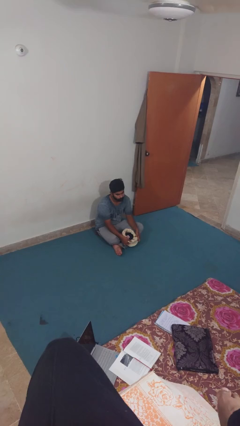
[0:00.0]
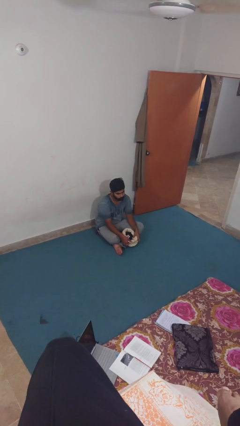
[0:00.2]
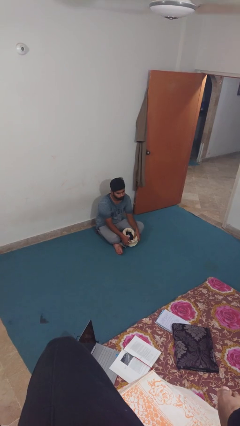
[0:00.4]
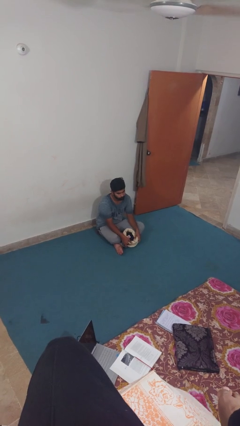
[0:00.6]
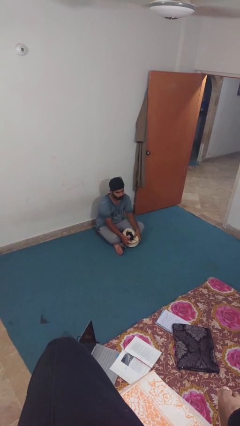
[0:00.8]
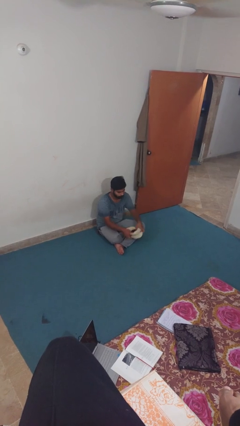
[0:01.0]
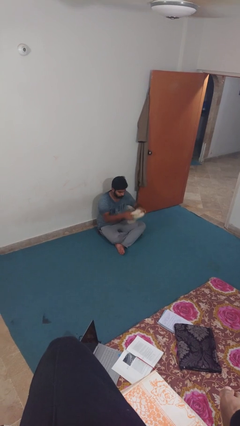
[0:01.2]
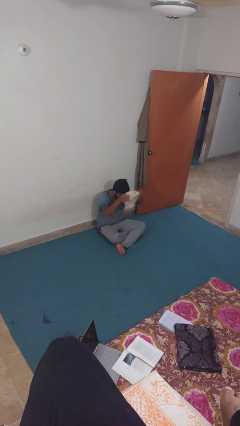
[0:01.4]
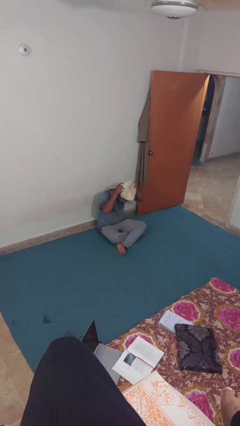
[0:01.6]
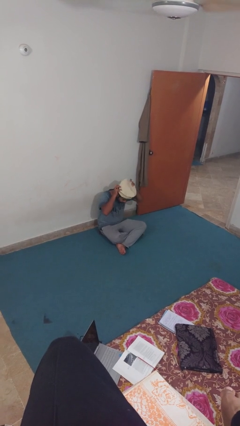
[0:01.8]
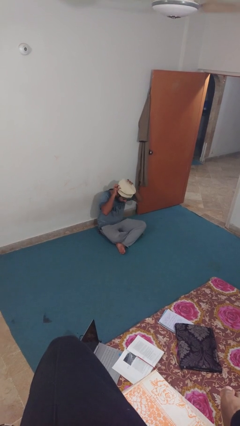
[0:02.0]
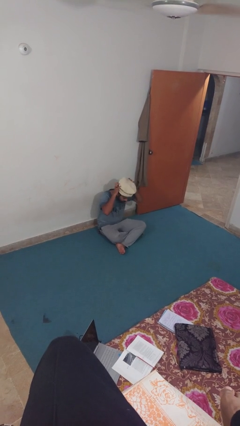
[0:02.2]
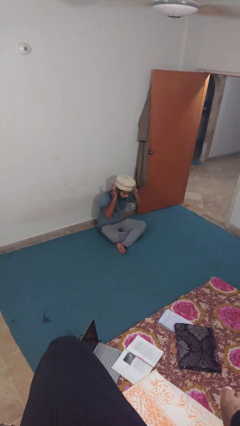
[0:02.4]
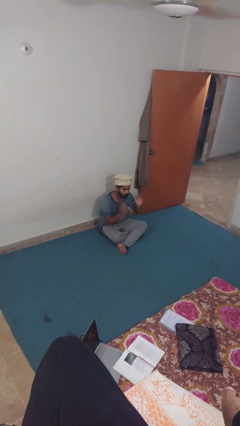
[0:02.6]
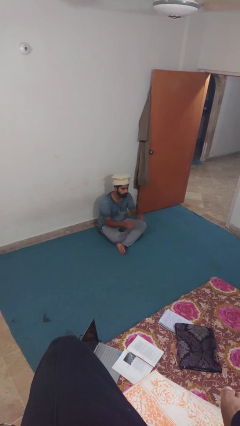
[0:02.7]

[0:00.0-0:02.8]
person puts on hat

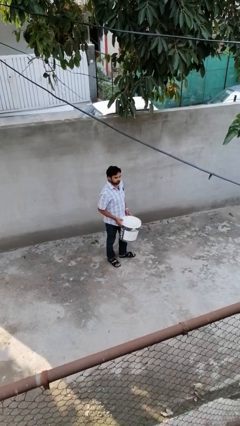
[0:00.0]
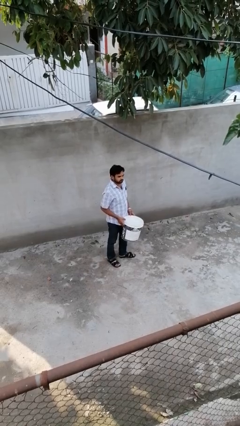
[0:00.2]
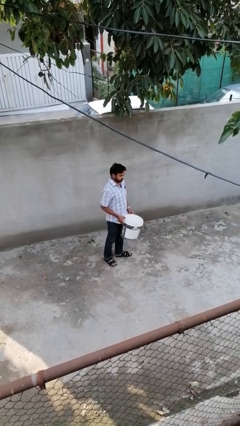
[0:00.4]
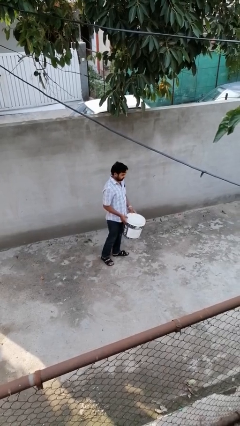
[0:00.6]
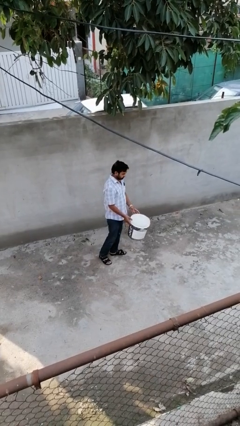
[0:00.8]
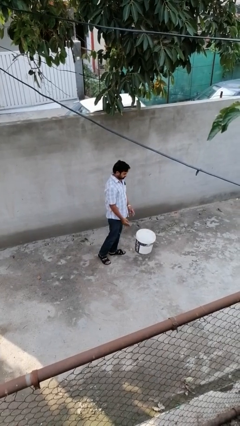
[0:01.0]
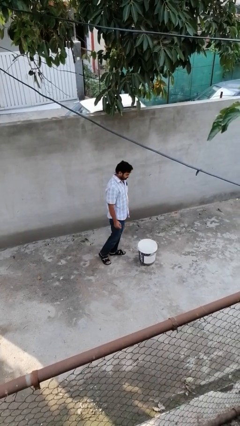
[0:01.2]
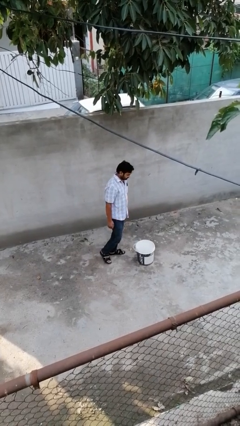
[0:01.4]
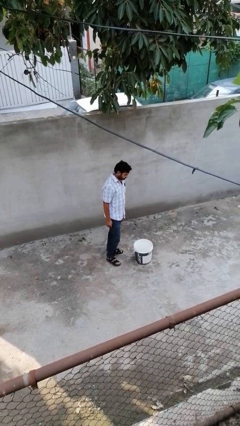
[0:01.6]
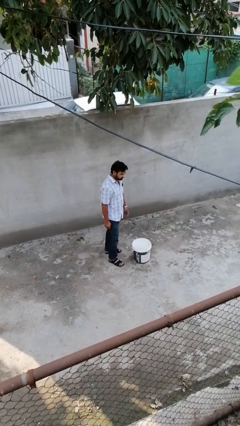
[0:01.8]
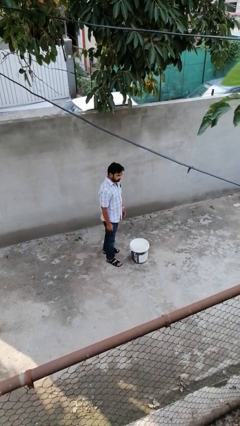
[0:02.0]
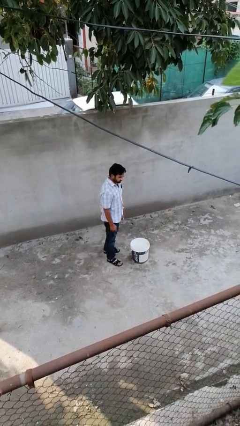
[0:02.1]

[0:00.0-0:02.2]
person drops object

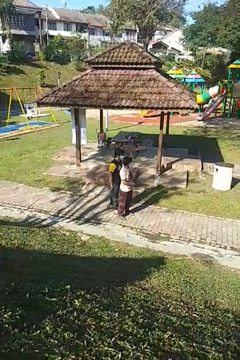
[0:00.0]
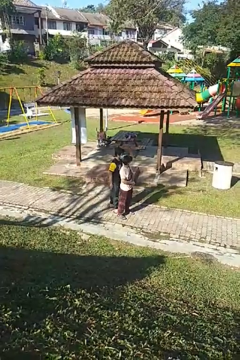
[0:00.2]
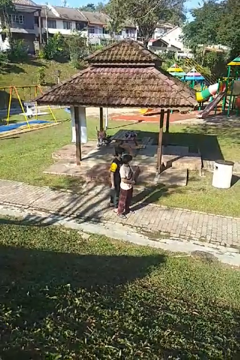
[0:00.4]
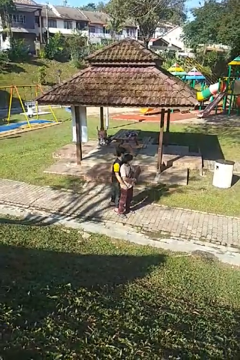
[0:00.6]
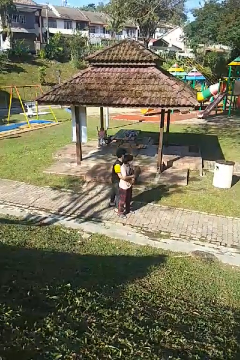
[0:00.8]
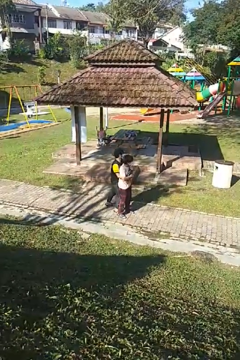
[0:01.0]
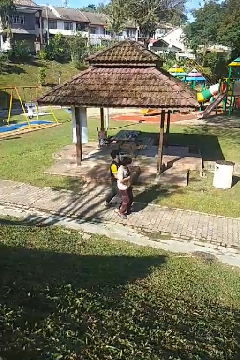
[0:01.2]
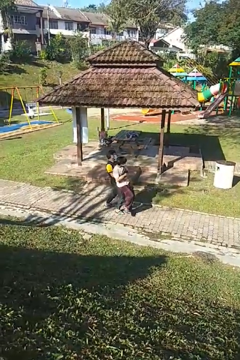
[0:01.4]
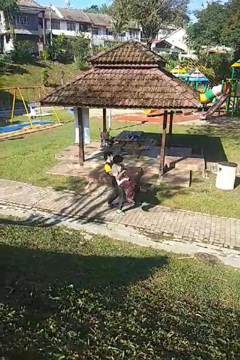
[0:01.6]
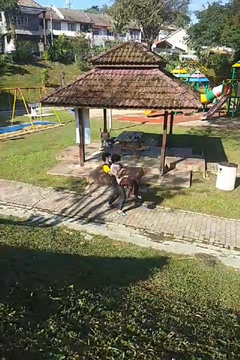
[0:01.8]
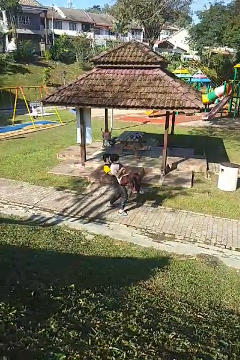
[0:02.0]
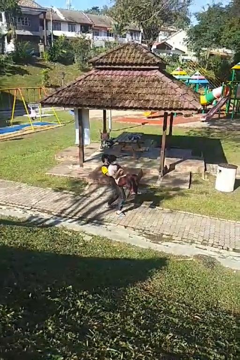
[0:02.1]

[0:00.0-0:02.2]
person picks up person

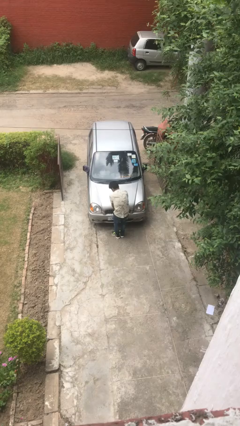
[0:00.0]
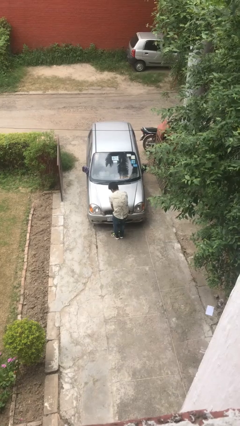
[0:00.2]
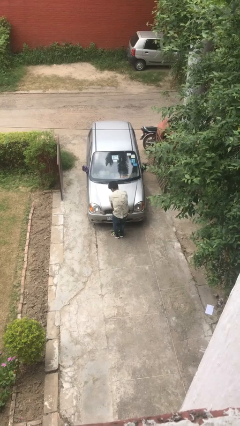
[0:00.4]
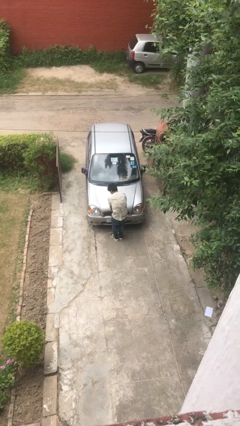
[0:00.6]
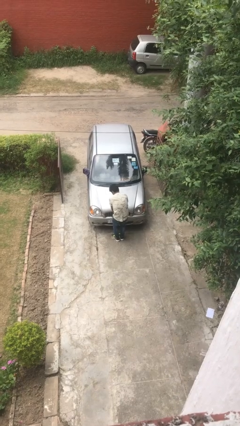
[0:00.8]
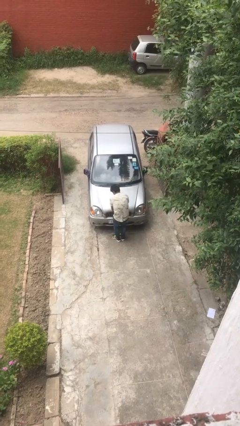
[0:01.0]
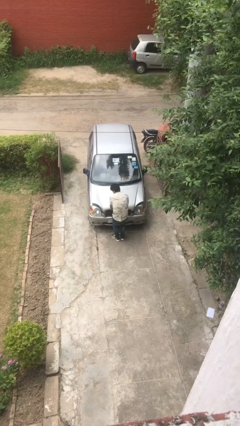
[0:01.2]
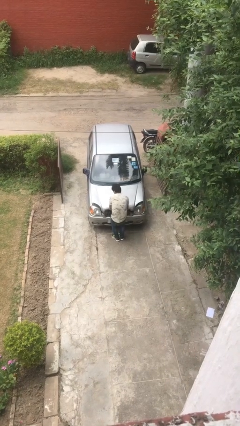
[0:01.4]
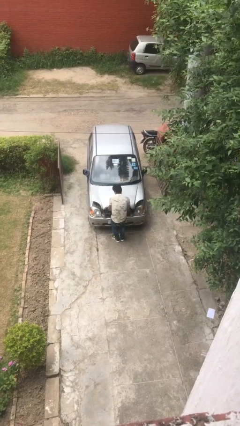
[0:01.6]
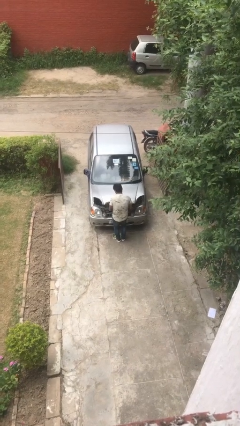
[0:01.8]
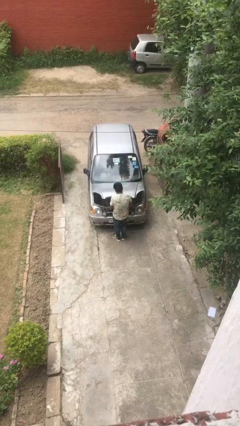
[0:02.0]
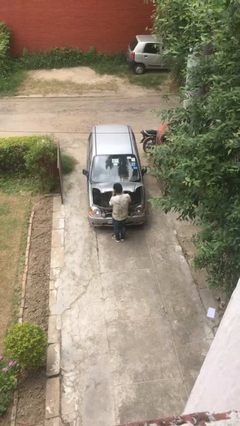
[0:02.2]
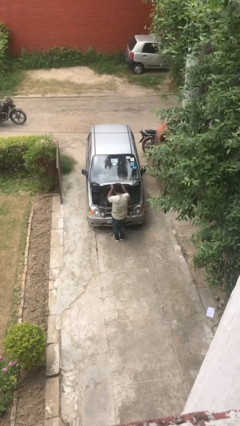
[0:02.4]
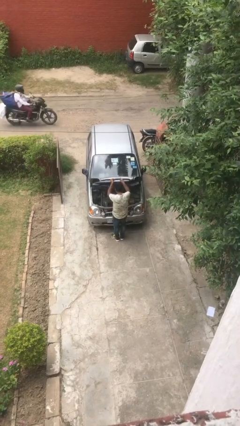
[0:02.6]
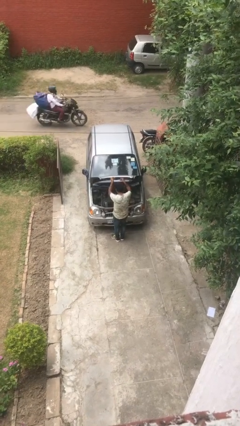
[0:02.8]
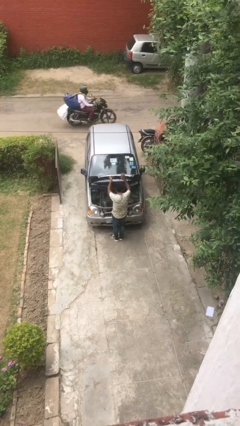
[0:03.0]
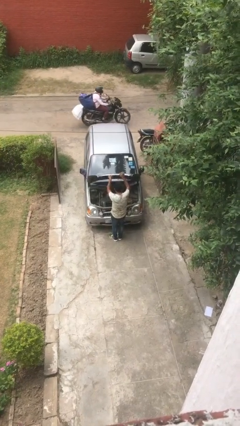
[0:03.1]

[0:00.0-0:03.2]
person opens car hood

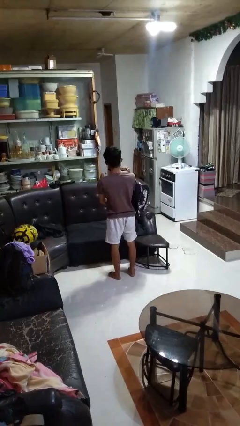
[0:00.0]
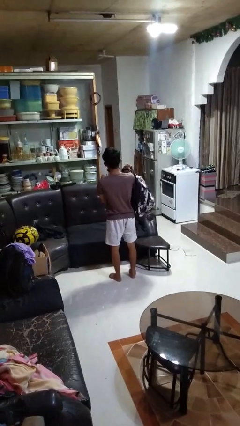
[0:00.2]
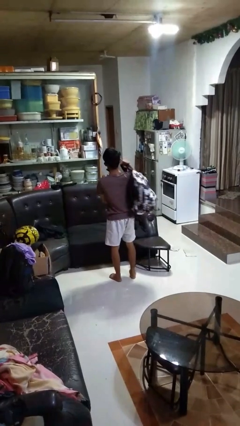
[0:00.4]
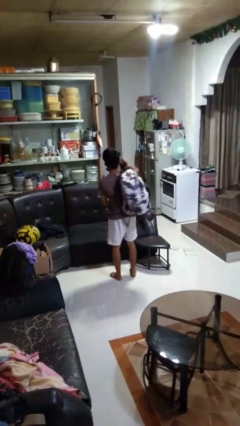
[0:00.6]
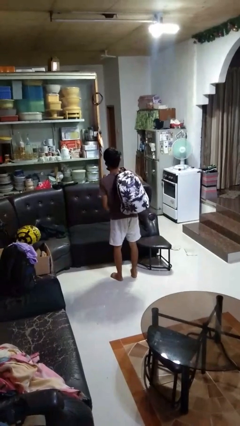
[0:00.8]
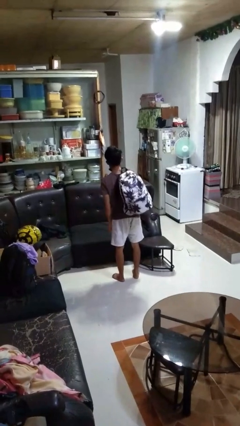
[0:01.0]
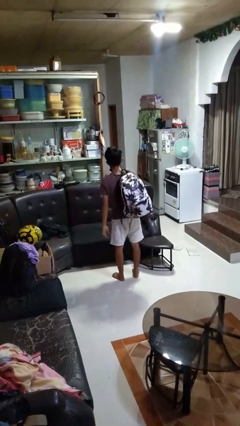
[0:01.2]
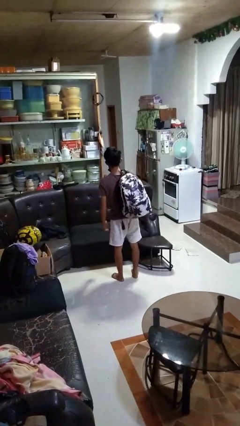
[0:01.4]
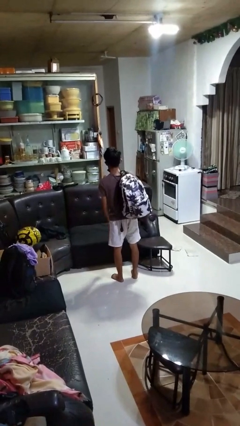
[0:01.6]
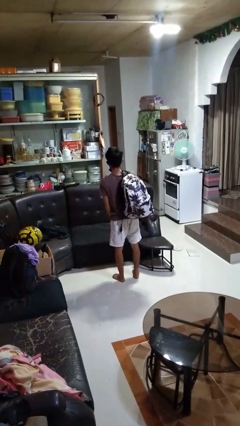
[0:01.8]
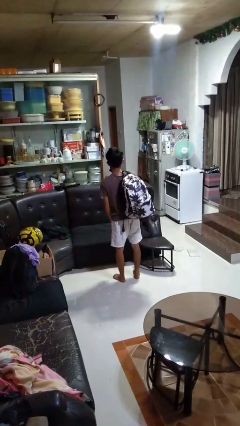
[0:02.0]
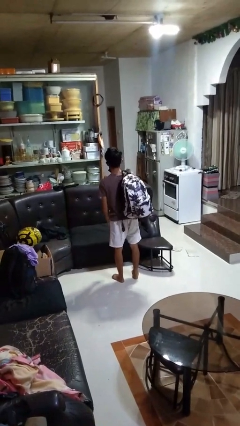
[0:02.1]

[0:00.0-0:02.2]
person puts on backpack

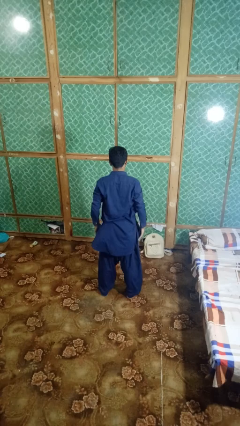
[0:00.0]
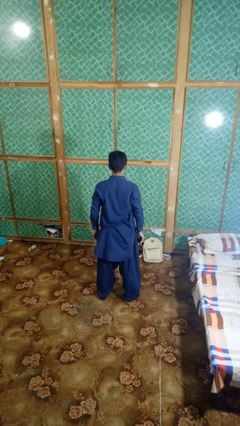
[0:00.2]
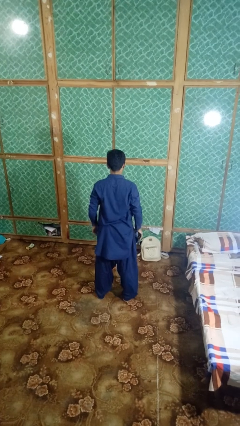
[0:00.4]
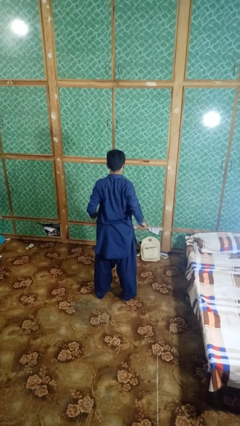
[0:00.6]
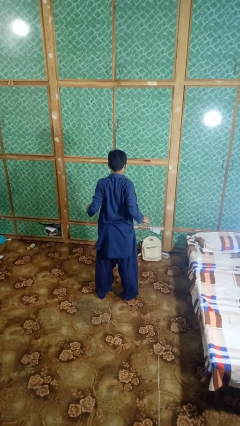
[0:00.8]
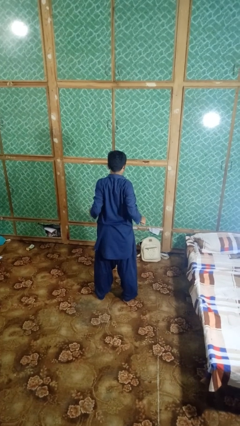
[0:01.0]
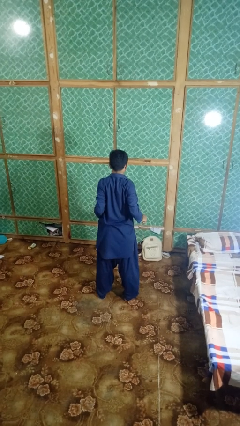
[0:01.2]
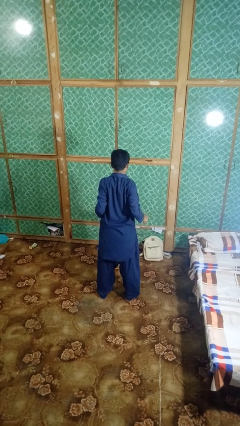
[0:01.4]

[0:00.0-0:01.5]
person stretches back

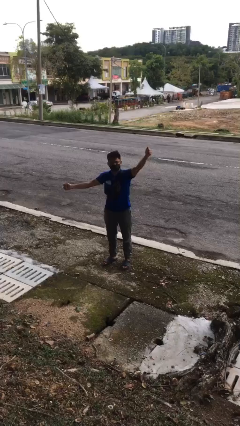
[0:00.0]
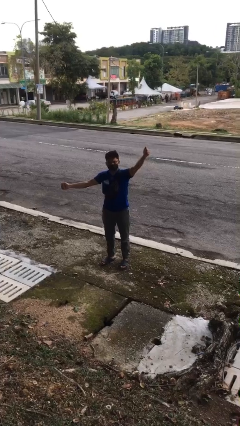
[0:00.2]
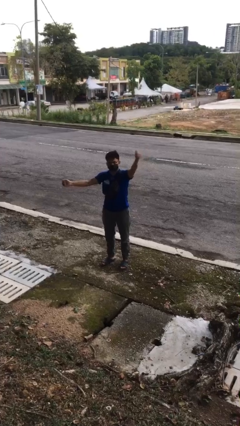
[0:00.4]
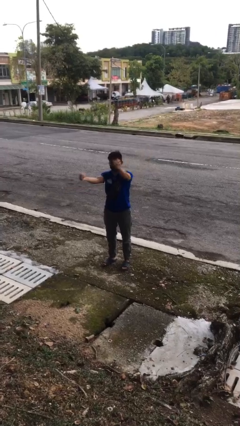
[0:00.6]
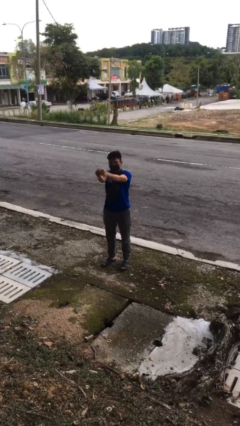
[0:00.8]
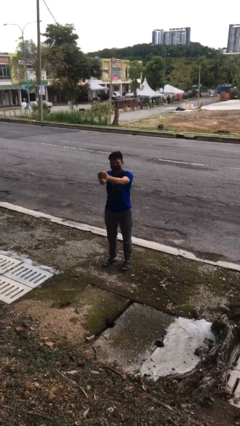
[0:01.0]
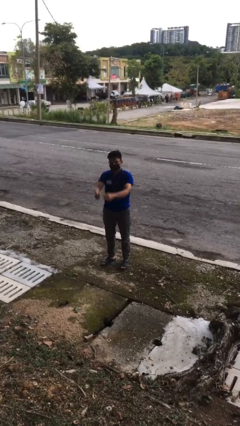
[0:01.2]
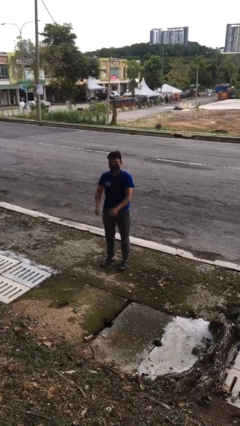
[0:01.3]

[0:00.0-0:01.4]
person gestures zoom out

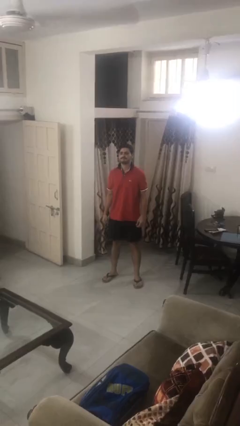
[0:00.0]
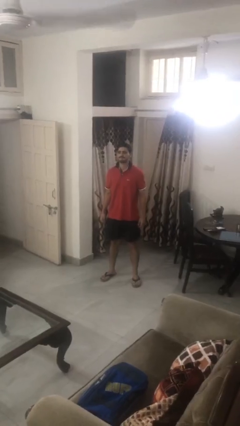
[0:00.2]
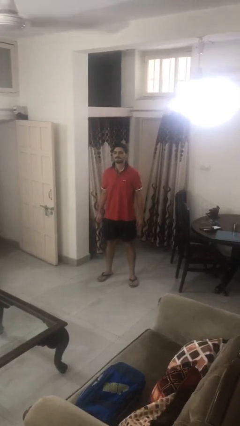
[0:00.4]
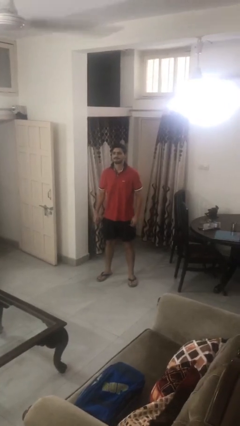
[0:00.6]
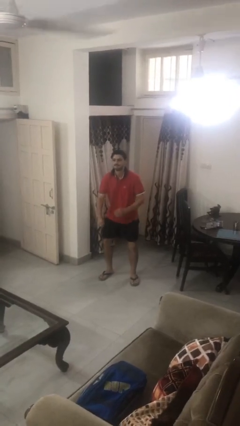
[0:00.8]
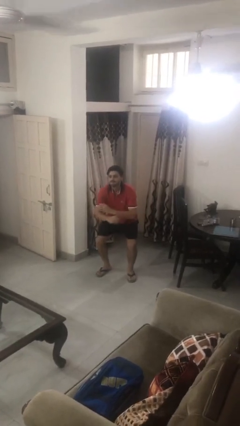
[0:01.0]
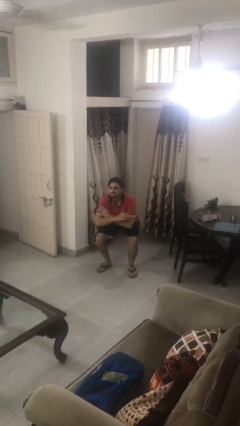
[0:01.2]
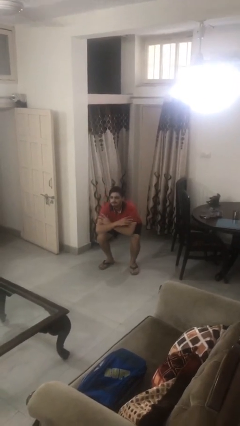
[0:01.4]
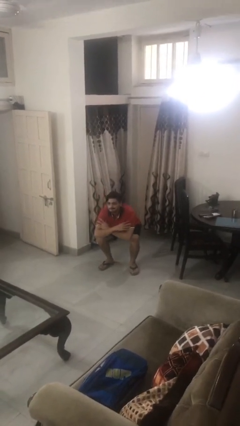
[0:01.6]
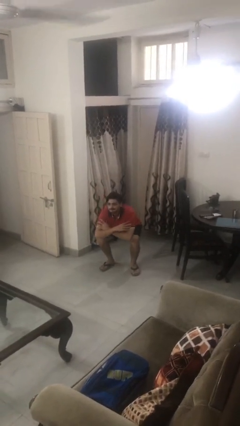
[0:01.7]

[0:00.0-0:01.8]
person squats
